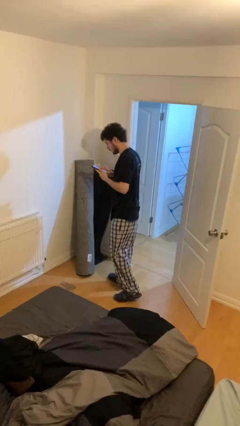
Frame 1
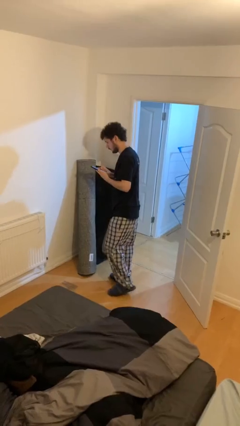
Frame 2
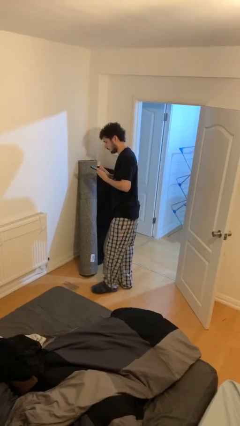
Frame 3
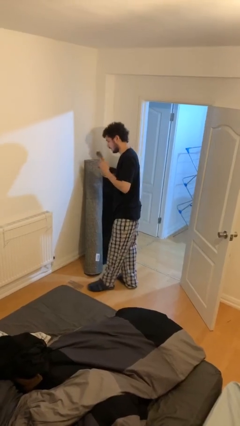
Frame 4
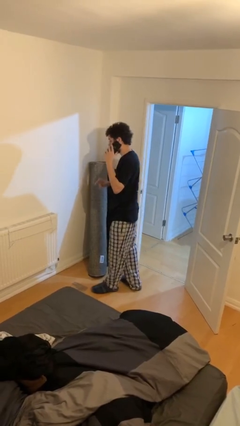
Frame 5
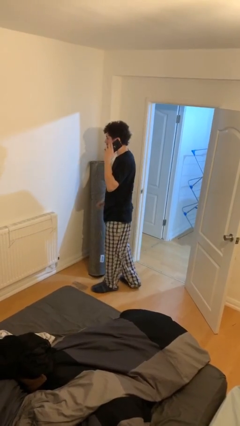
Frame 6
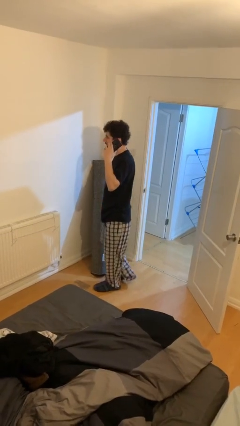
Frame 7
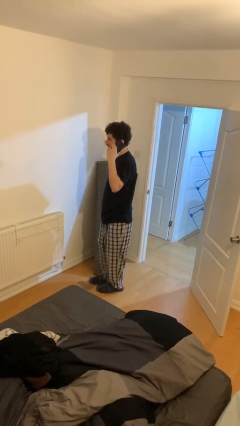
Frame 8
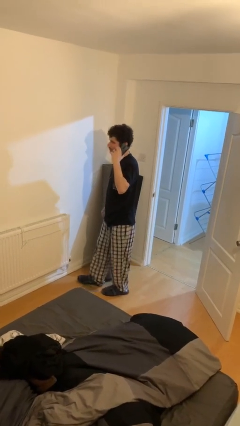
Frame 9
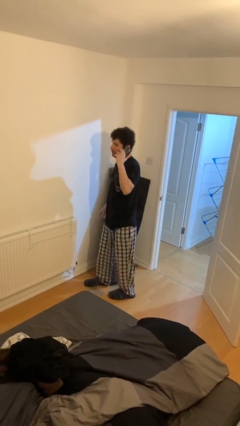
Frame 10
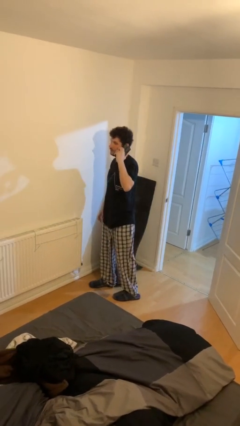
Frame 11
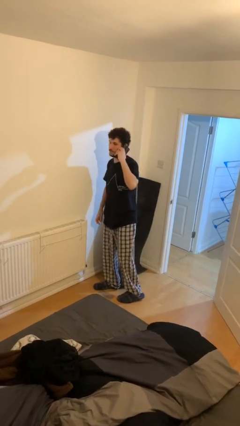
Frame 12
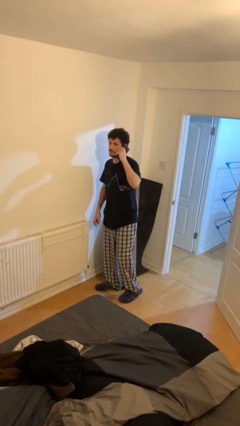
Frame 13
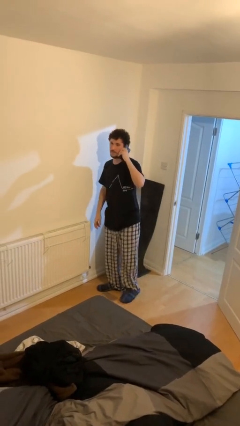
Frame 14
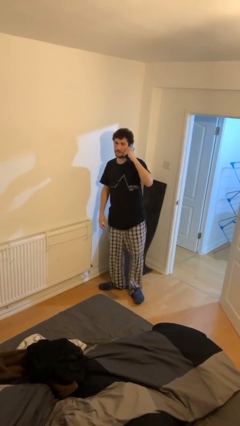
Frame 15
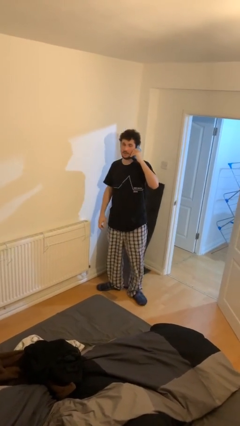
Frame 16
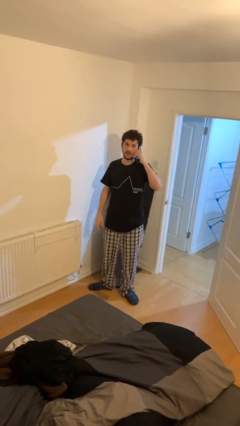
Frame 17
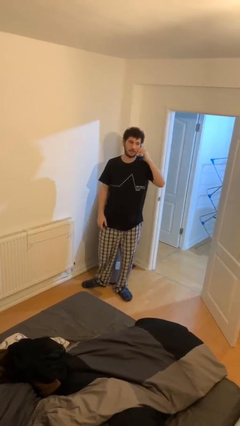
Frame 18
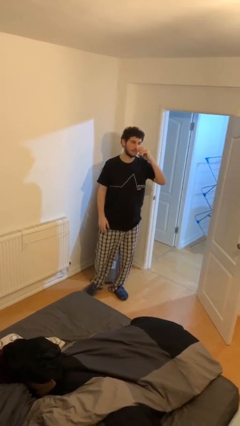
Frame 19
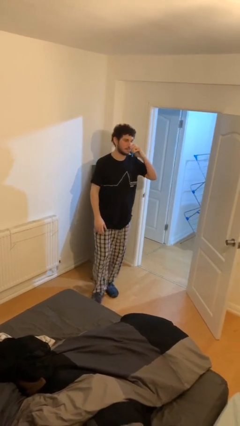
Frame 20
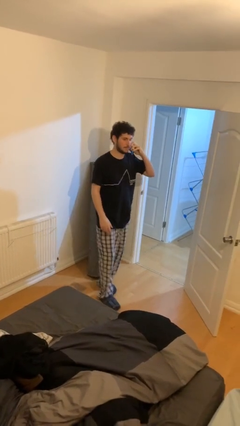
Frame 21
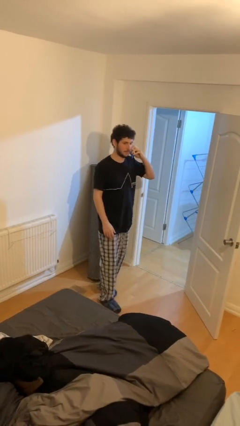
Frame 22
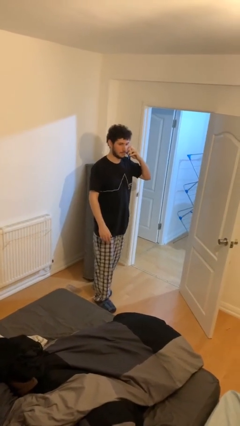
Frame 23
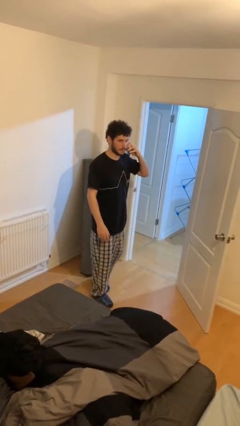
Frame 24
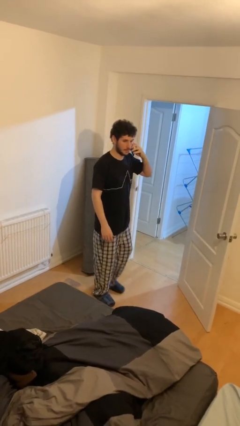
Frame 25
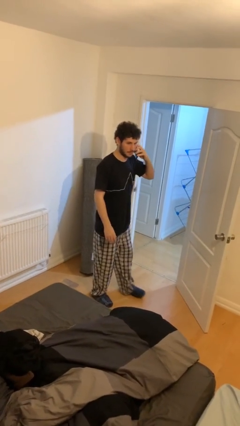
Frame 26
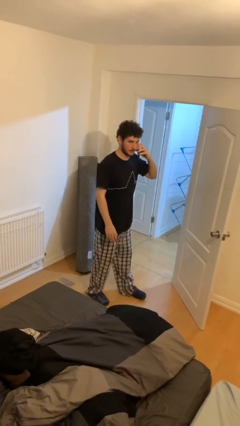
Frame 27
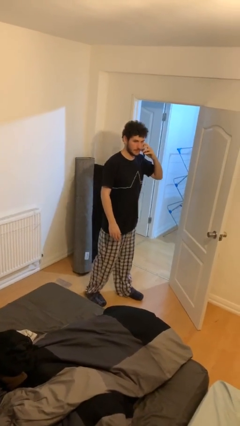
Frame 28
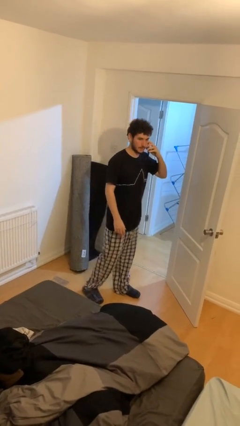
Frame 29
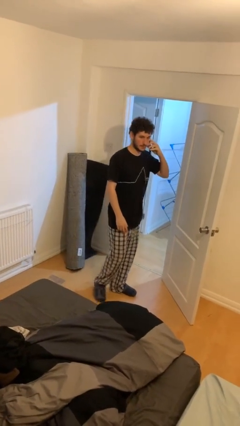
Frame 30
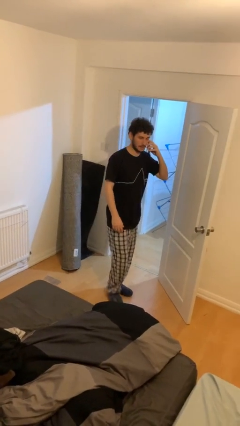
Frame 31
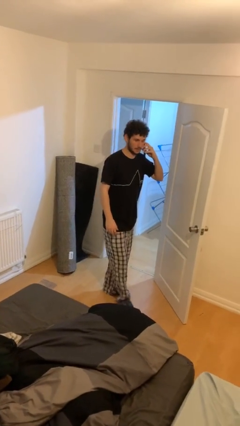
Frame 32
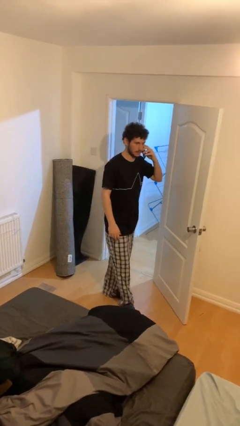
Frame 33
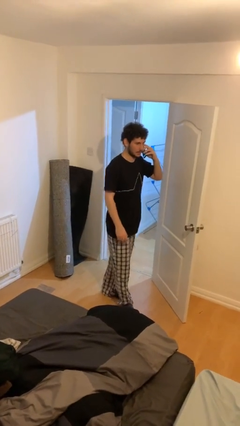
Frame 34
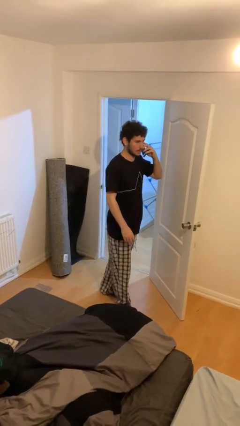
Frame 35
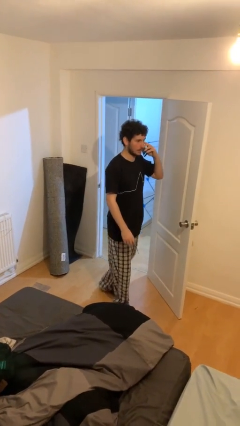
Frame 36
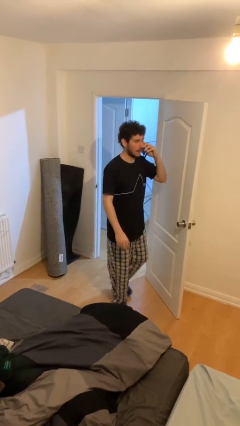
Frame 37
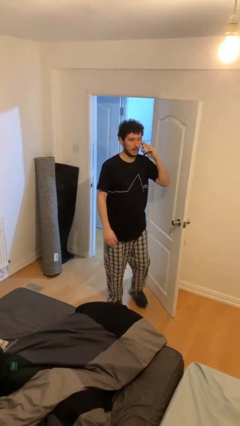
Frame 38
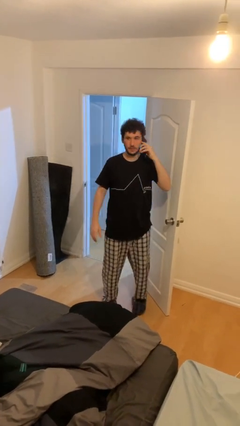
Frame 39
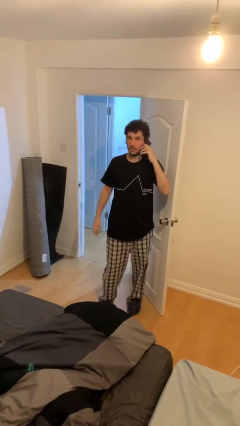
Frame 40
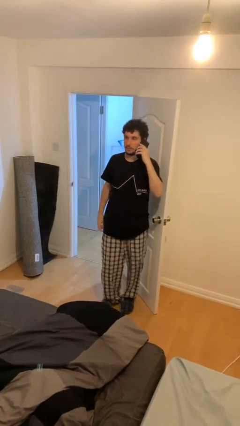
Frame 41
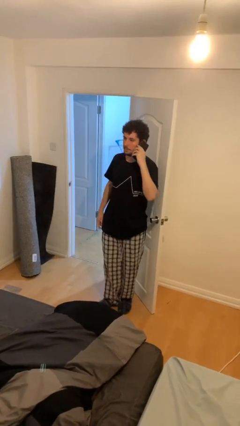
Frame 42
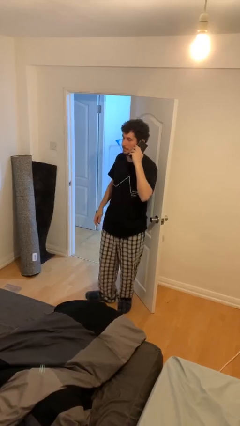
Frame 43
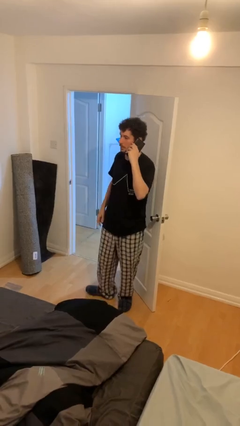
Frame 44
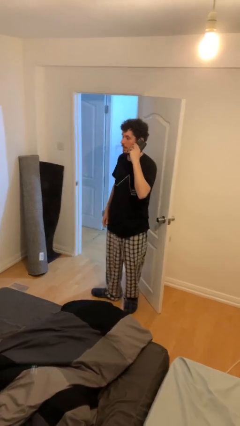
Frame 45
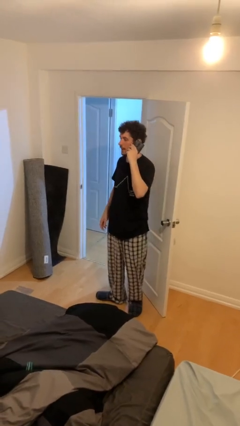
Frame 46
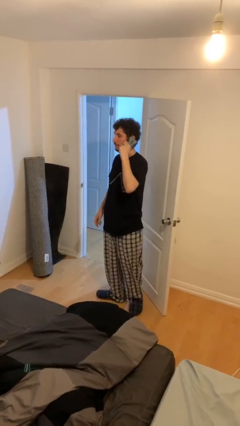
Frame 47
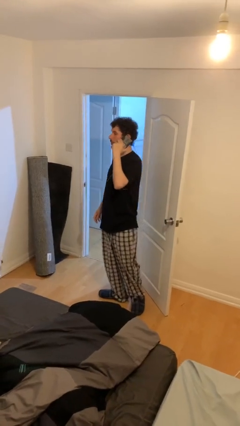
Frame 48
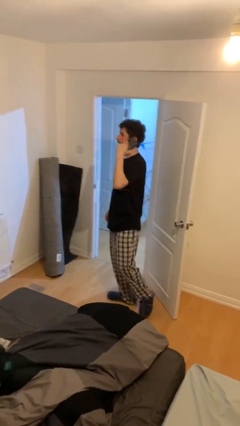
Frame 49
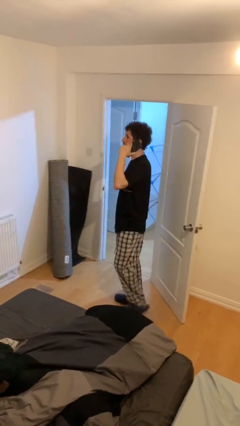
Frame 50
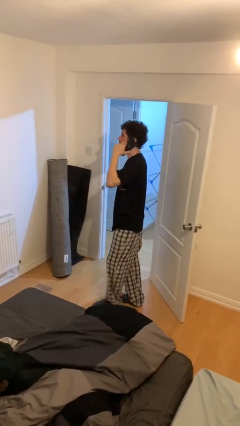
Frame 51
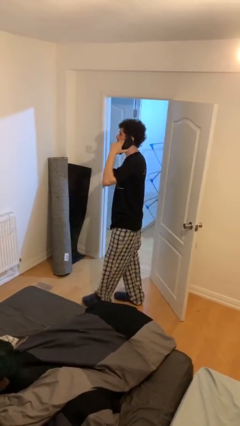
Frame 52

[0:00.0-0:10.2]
person talks on phone

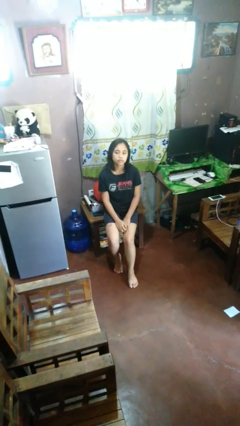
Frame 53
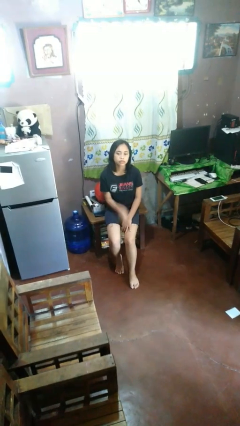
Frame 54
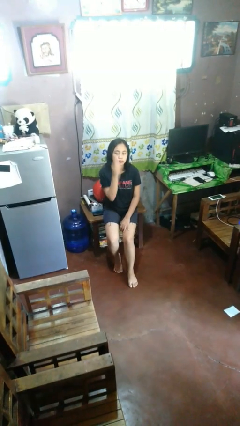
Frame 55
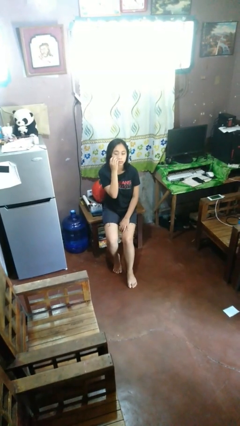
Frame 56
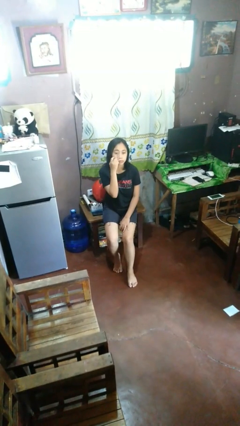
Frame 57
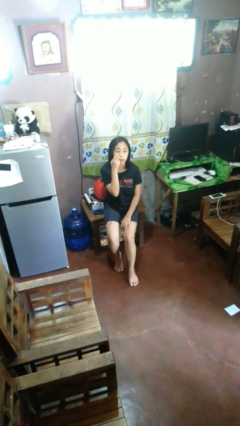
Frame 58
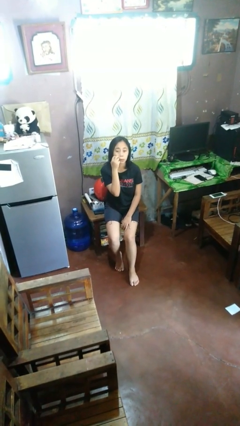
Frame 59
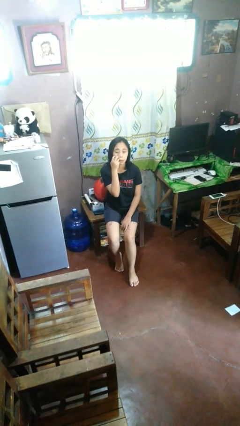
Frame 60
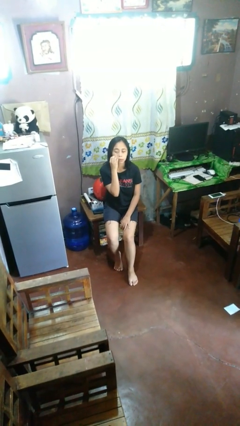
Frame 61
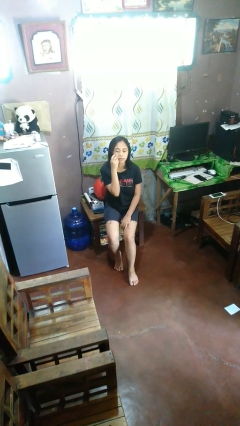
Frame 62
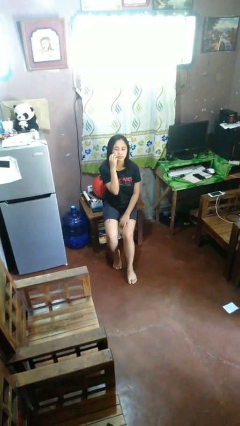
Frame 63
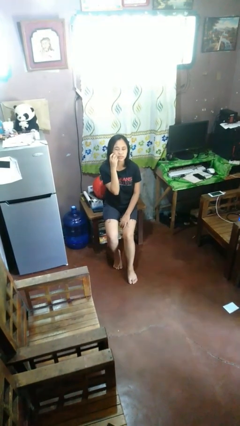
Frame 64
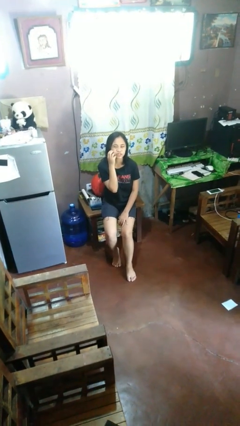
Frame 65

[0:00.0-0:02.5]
person scratches face

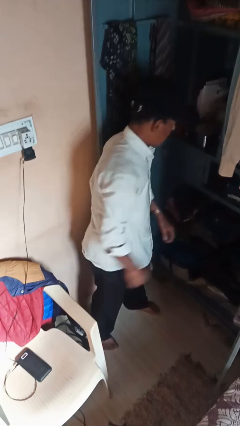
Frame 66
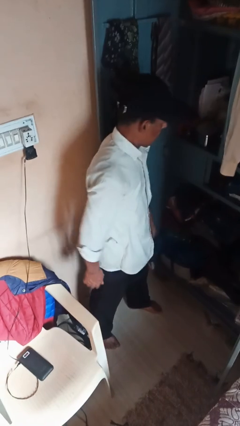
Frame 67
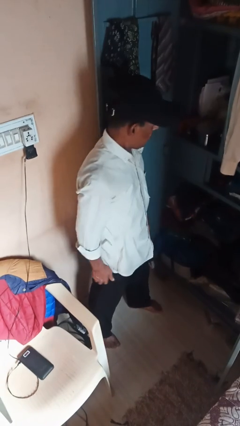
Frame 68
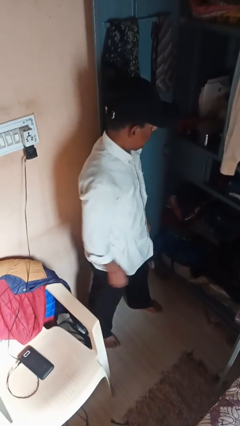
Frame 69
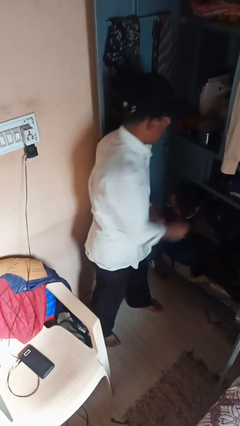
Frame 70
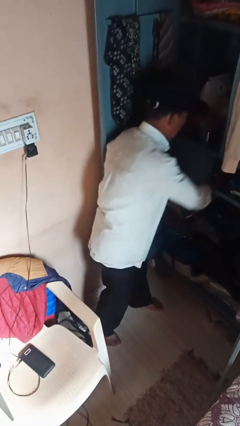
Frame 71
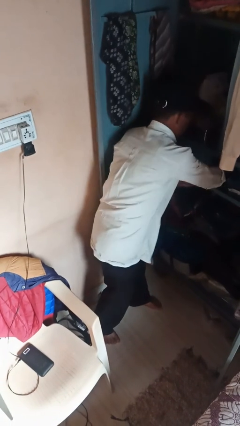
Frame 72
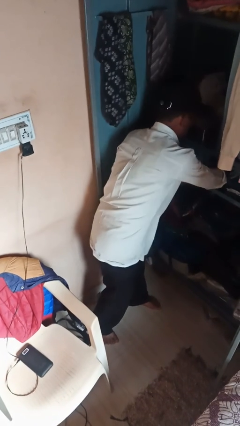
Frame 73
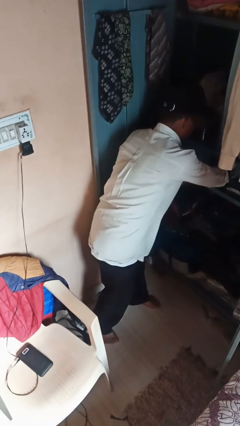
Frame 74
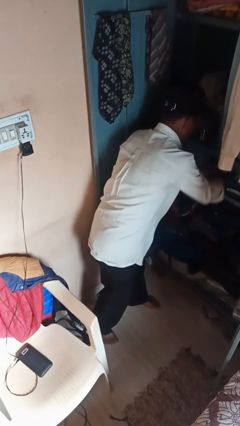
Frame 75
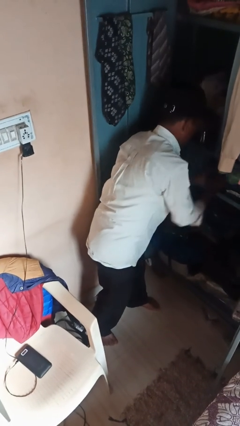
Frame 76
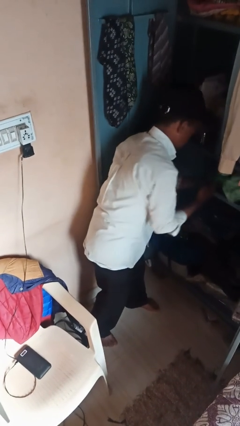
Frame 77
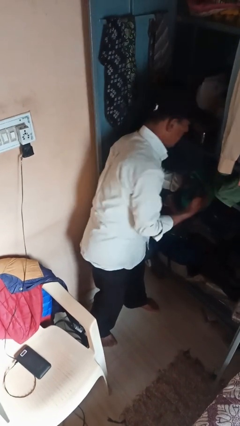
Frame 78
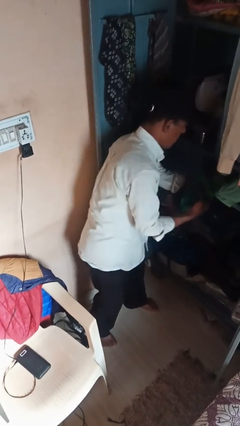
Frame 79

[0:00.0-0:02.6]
person takes clothes from dresser

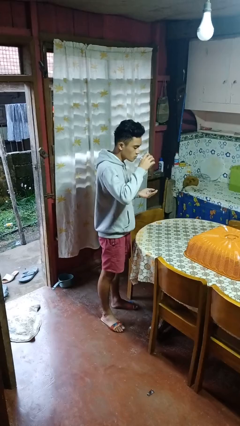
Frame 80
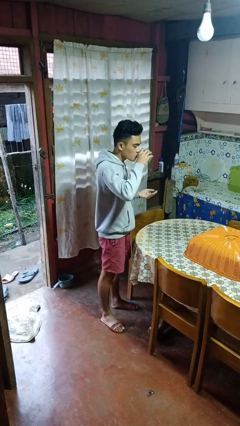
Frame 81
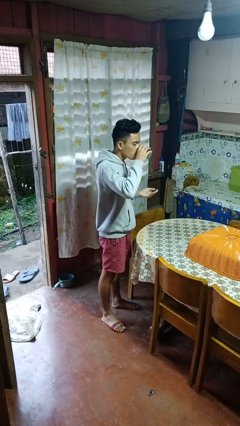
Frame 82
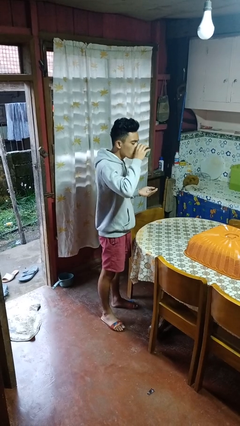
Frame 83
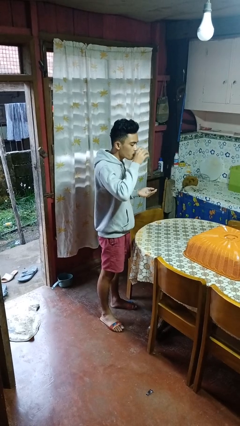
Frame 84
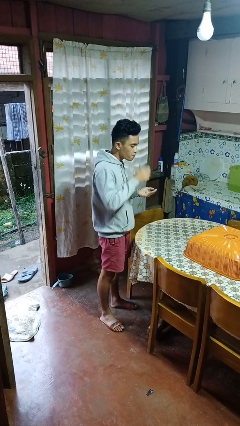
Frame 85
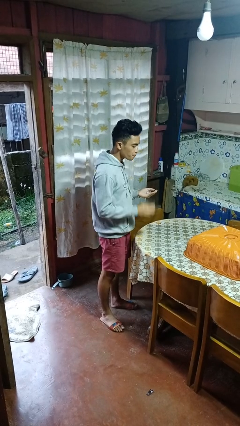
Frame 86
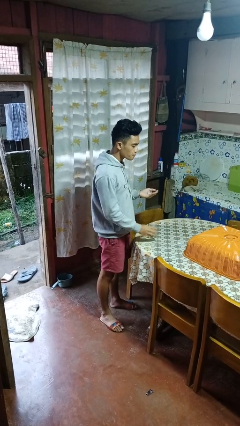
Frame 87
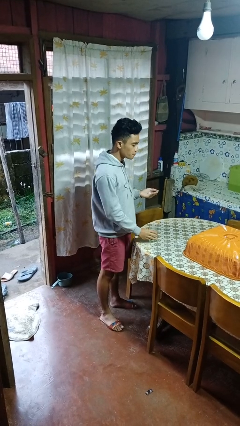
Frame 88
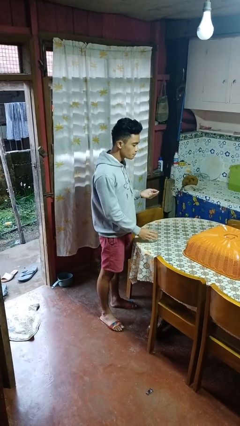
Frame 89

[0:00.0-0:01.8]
person drinks from cup

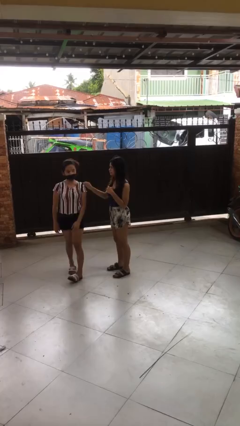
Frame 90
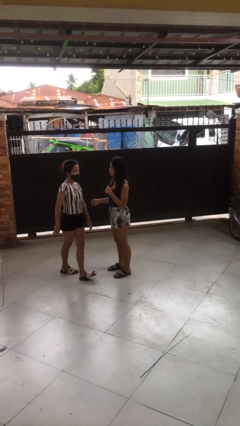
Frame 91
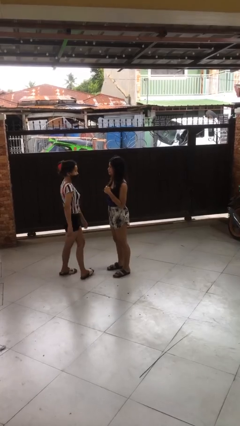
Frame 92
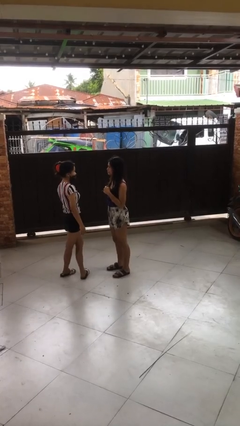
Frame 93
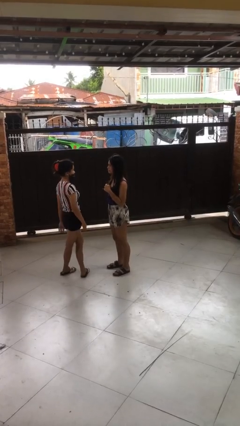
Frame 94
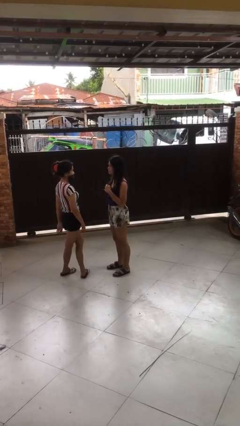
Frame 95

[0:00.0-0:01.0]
person spins person around
